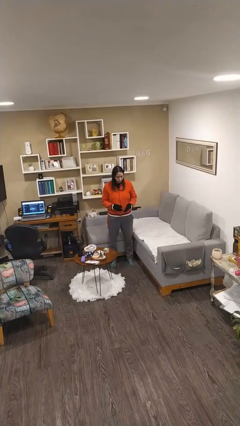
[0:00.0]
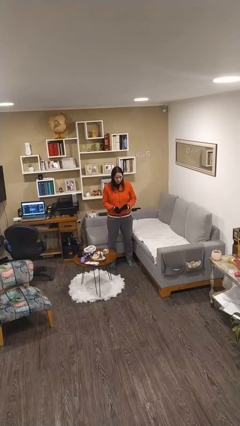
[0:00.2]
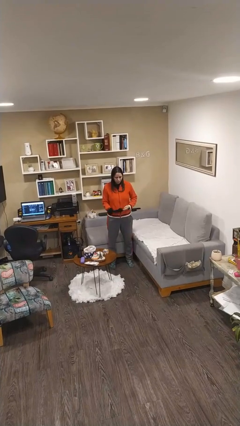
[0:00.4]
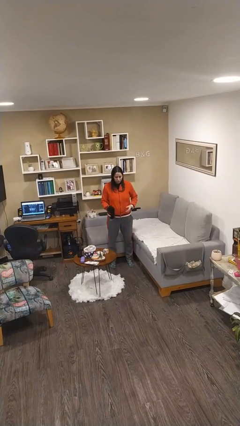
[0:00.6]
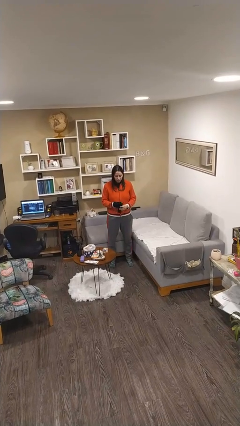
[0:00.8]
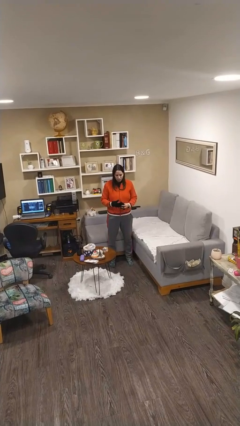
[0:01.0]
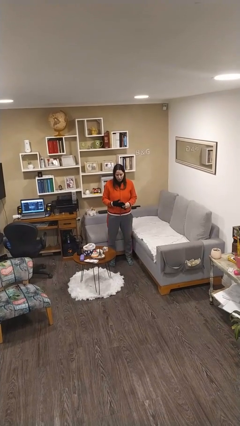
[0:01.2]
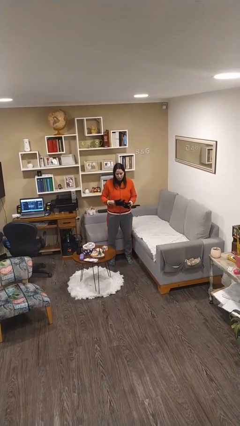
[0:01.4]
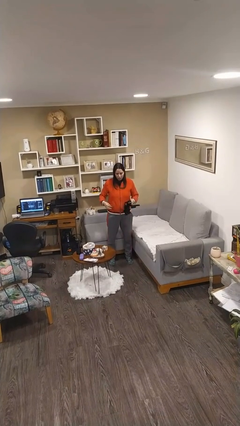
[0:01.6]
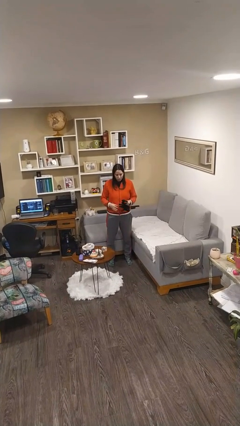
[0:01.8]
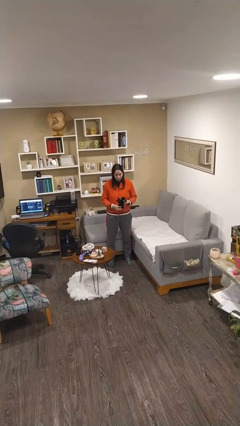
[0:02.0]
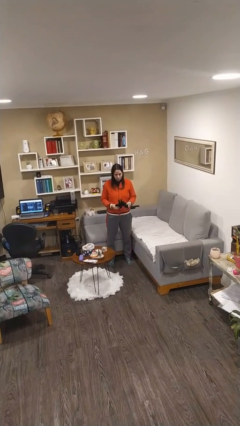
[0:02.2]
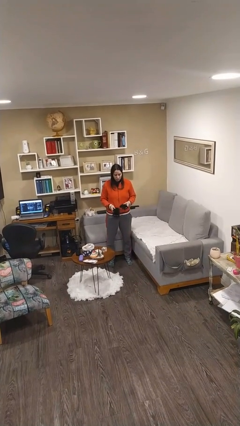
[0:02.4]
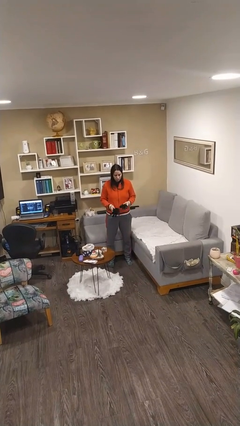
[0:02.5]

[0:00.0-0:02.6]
person takes off gloves

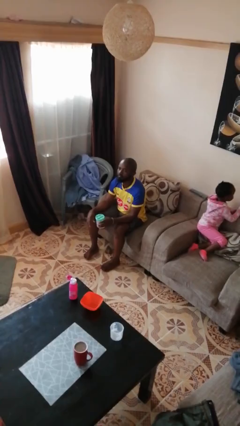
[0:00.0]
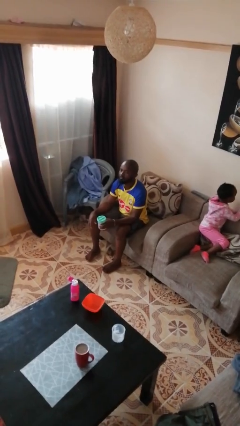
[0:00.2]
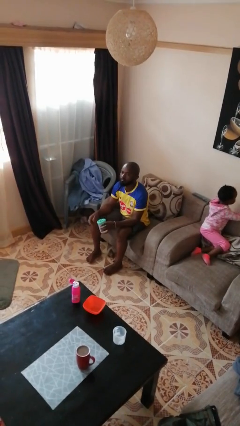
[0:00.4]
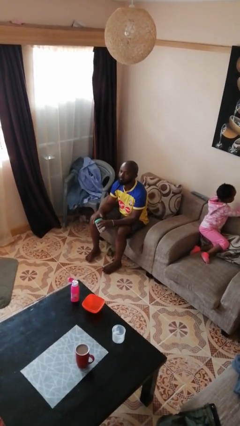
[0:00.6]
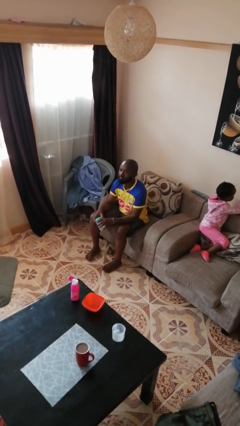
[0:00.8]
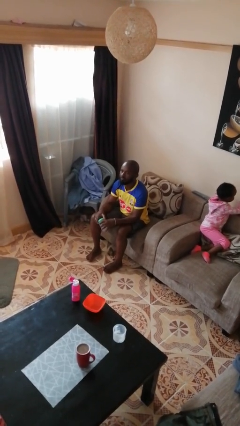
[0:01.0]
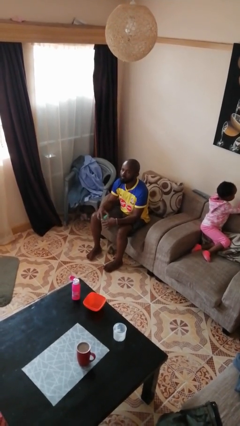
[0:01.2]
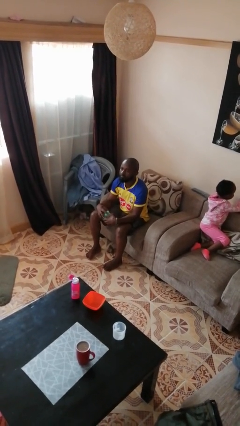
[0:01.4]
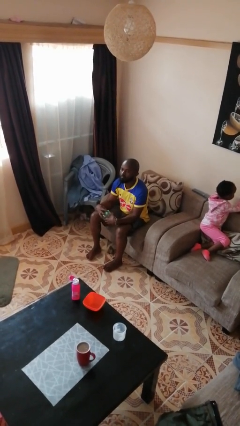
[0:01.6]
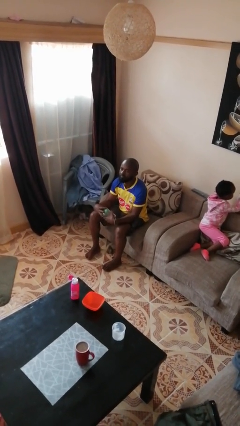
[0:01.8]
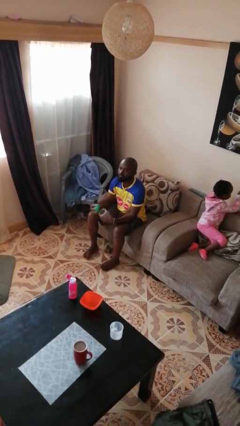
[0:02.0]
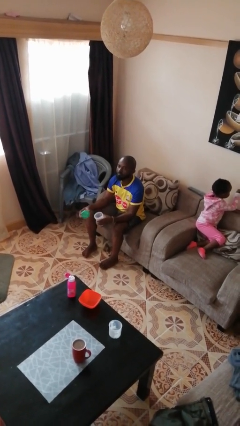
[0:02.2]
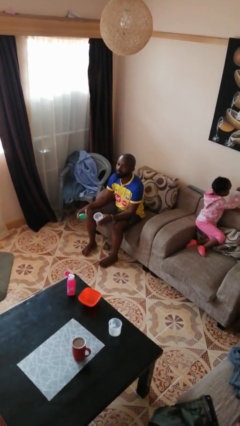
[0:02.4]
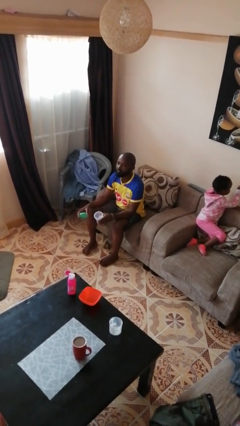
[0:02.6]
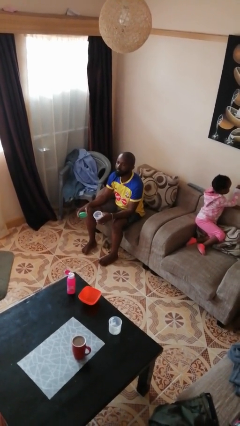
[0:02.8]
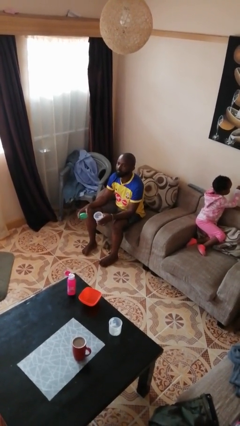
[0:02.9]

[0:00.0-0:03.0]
person opens jar

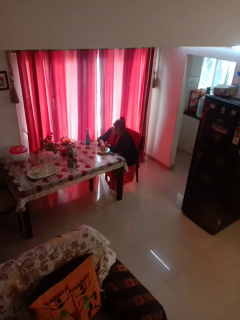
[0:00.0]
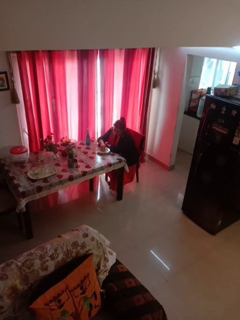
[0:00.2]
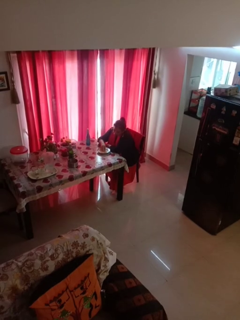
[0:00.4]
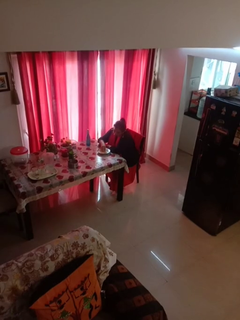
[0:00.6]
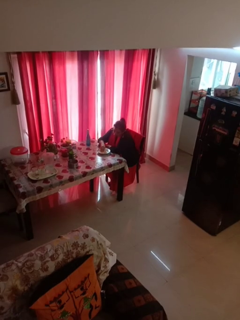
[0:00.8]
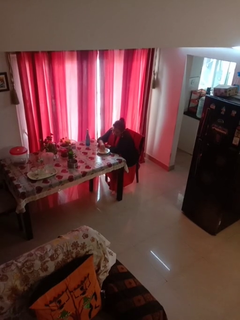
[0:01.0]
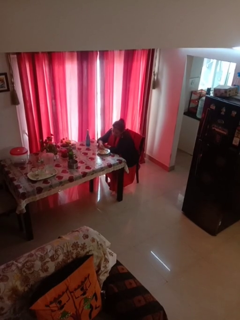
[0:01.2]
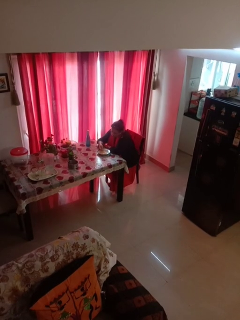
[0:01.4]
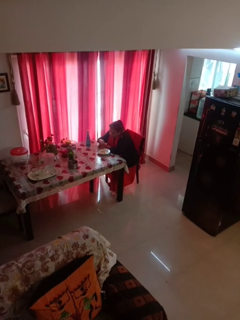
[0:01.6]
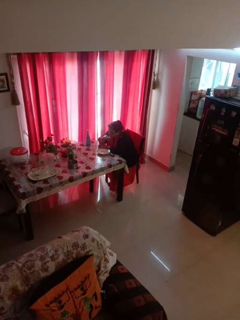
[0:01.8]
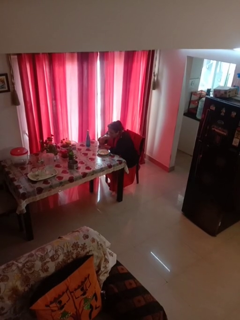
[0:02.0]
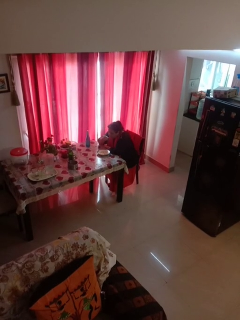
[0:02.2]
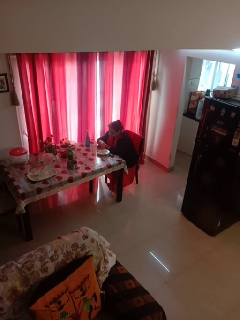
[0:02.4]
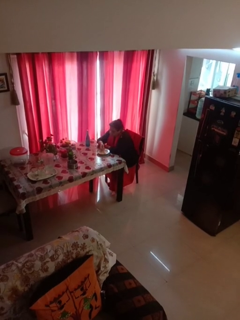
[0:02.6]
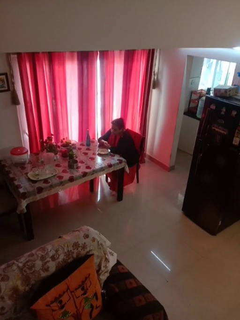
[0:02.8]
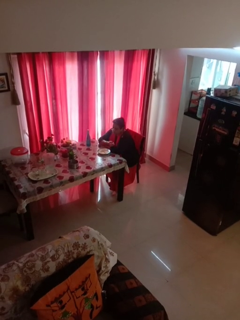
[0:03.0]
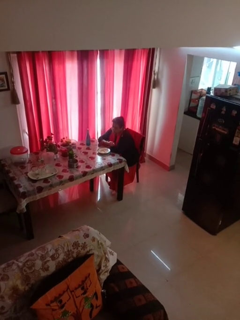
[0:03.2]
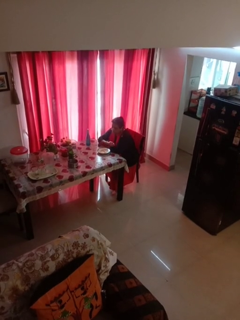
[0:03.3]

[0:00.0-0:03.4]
person eats with hands

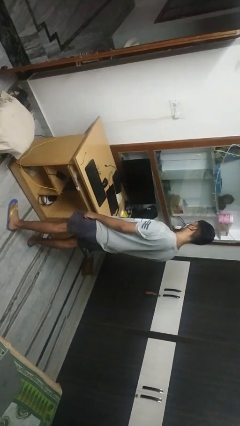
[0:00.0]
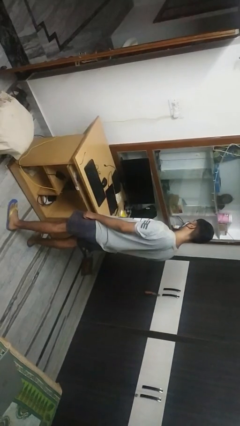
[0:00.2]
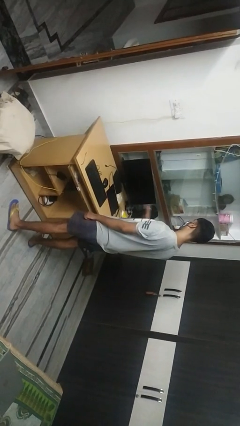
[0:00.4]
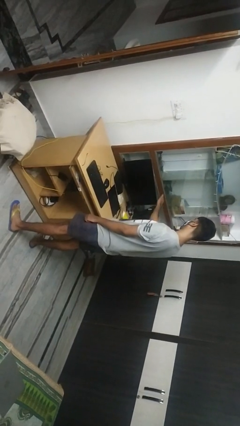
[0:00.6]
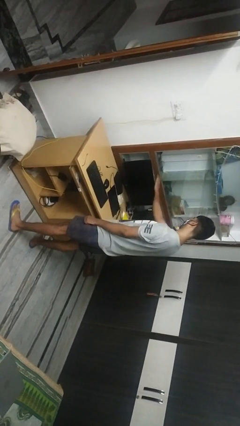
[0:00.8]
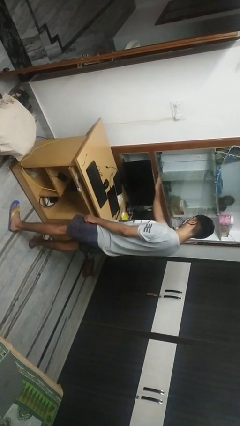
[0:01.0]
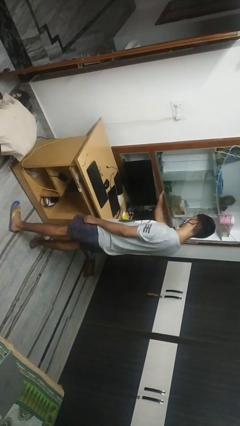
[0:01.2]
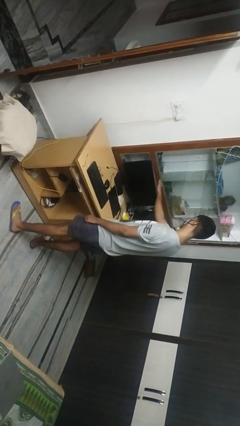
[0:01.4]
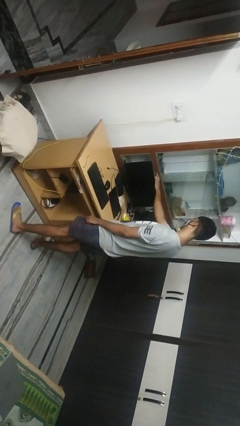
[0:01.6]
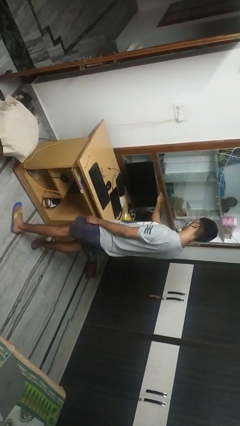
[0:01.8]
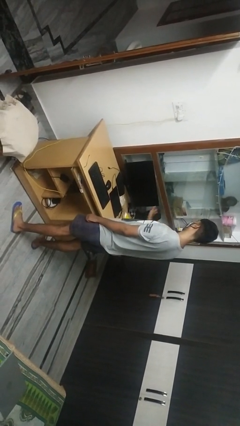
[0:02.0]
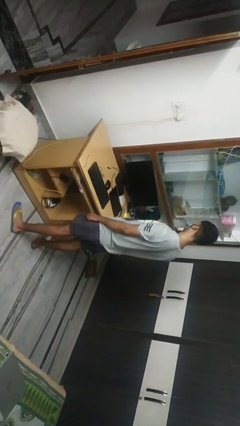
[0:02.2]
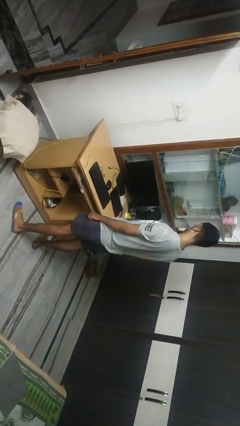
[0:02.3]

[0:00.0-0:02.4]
person waves hand over object

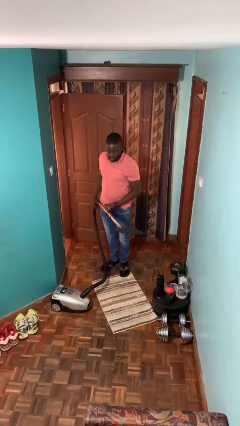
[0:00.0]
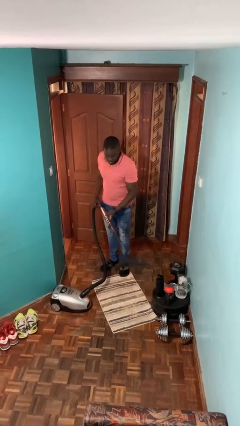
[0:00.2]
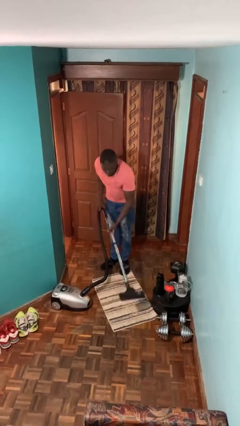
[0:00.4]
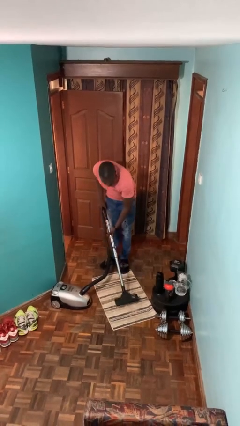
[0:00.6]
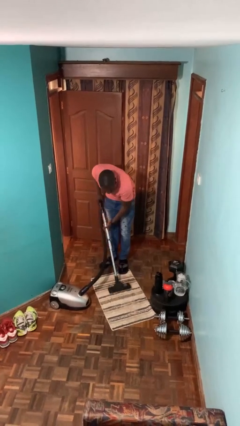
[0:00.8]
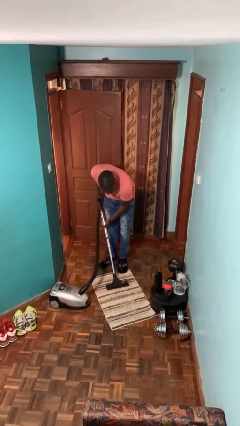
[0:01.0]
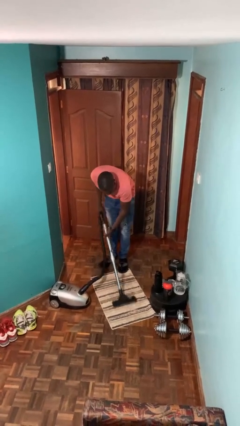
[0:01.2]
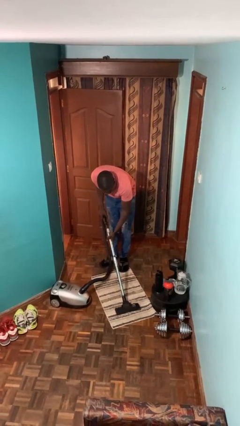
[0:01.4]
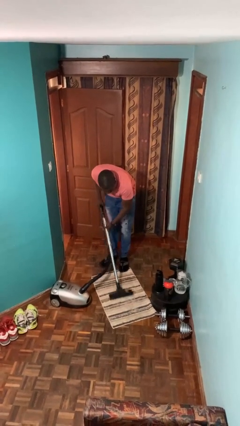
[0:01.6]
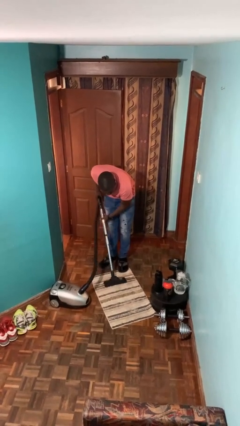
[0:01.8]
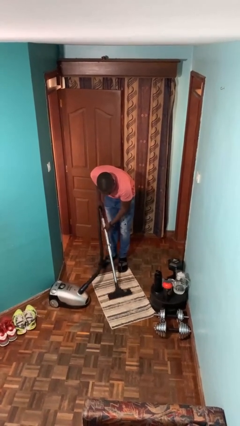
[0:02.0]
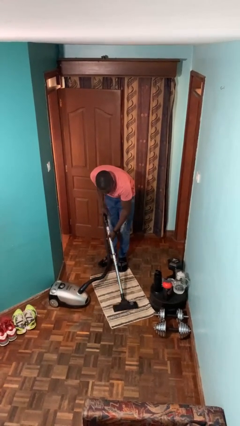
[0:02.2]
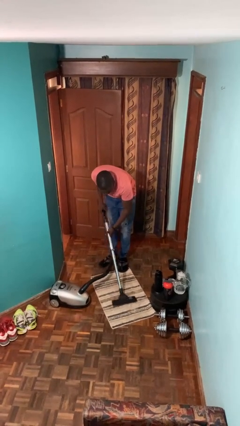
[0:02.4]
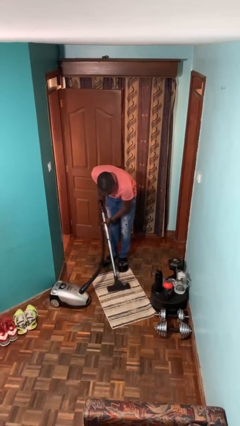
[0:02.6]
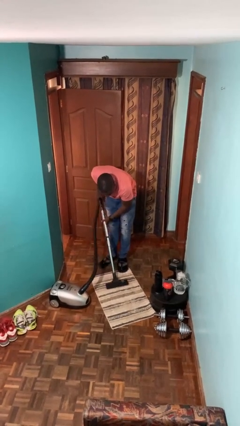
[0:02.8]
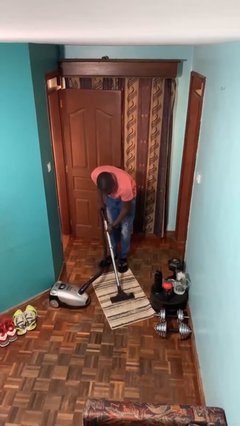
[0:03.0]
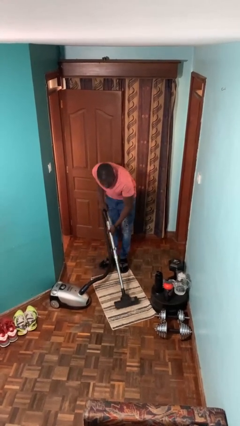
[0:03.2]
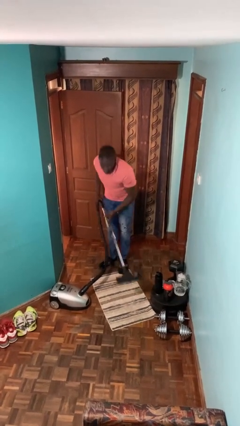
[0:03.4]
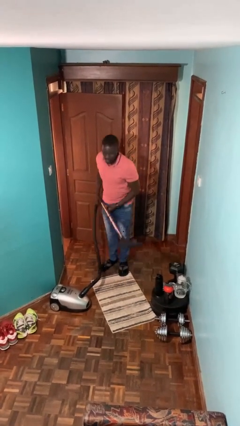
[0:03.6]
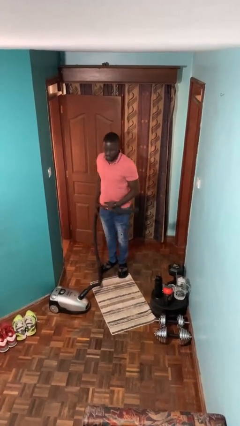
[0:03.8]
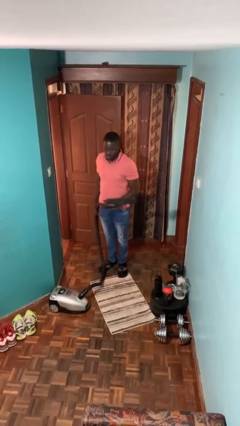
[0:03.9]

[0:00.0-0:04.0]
person vacuums carpet

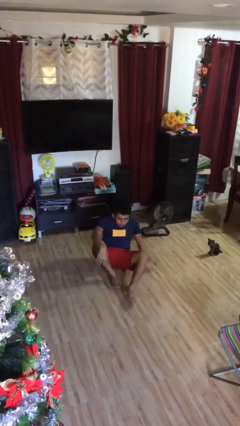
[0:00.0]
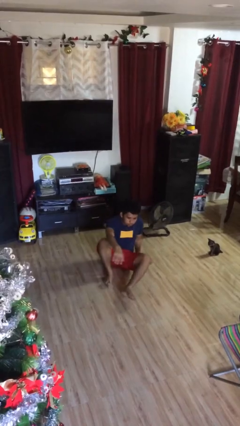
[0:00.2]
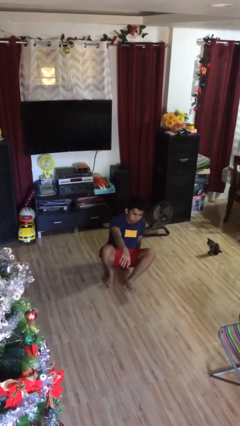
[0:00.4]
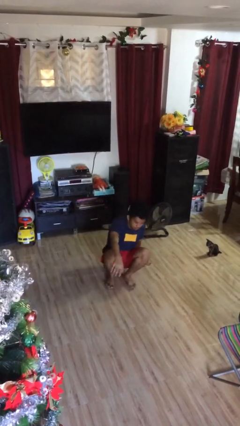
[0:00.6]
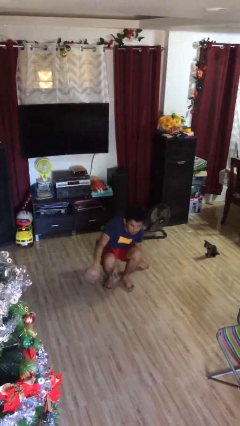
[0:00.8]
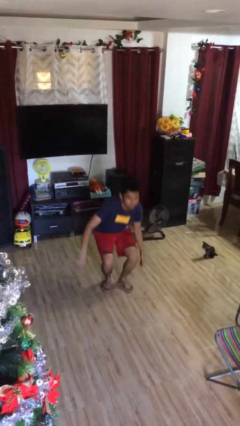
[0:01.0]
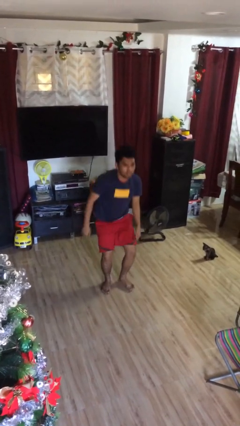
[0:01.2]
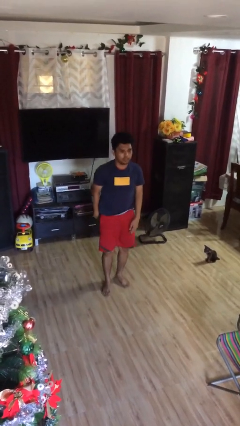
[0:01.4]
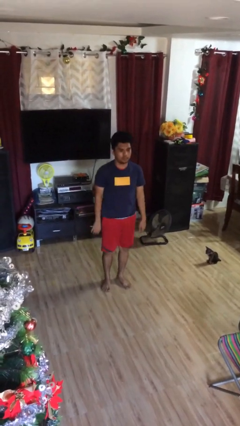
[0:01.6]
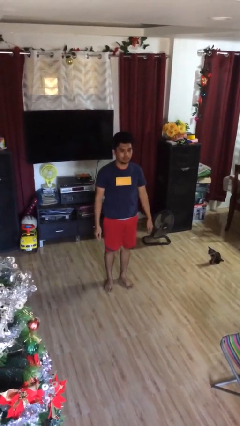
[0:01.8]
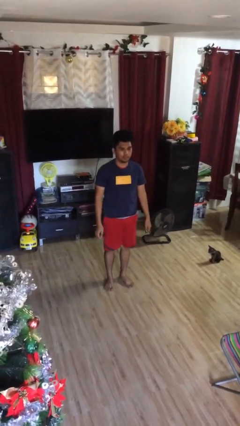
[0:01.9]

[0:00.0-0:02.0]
person stands up

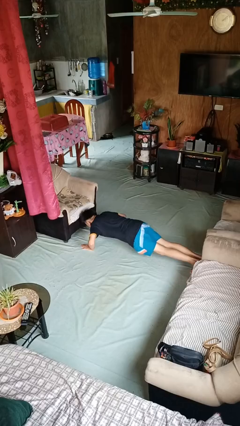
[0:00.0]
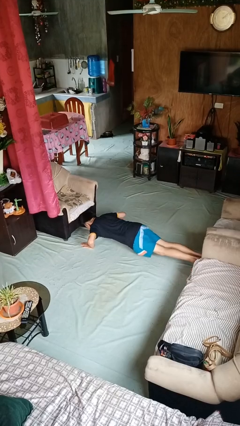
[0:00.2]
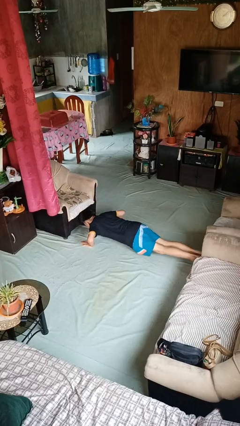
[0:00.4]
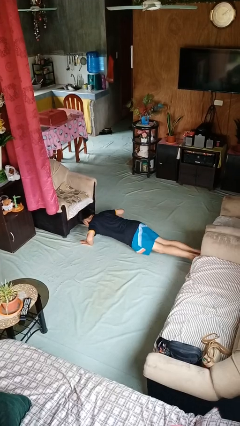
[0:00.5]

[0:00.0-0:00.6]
person exercises with pushup

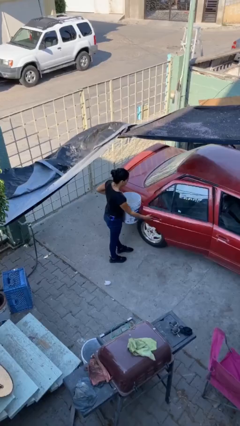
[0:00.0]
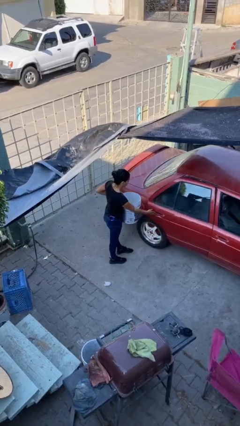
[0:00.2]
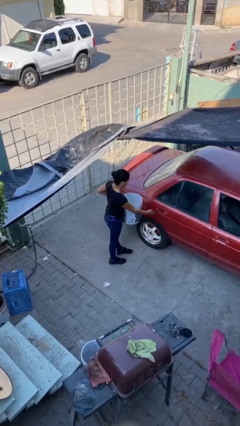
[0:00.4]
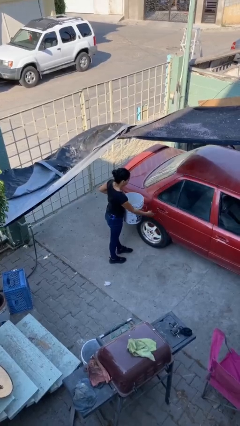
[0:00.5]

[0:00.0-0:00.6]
person closes car door
